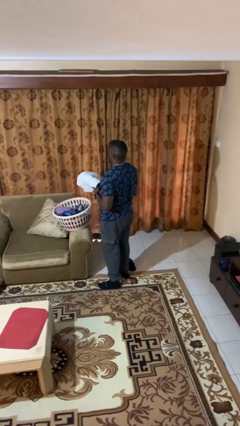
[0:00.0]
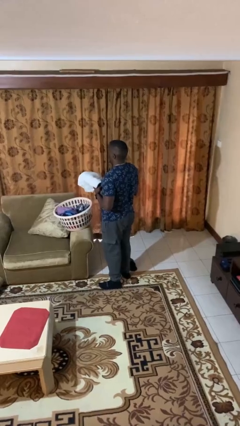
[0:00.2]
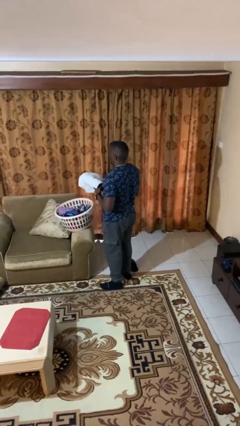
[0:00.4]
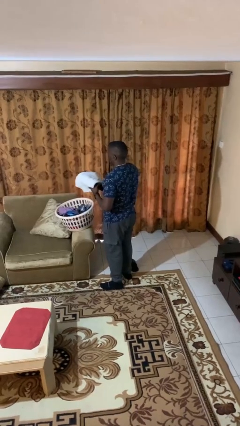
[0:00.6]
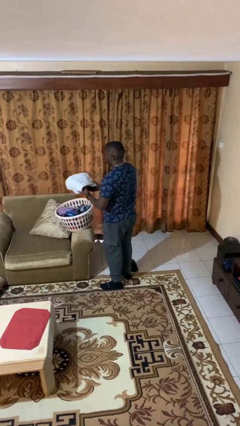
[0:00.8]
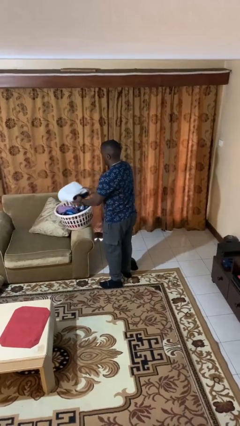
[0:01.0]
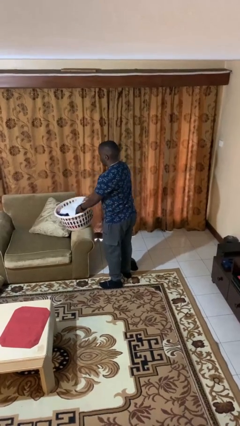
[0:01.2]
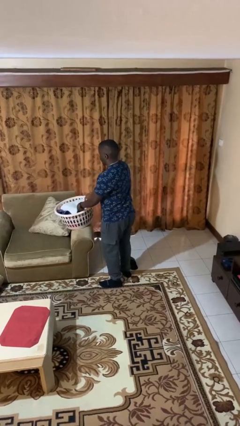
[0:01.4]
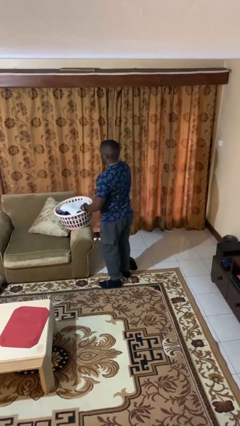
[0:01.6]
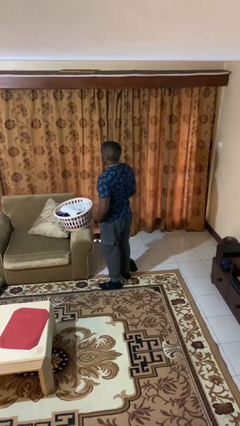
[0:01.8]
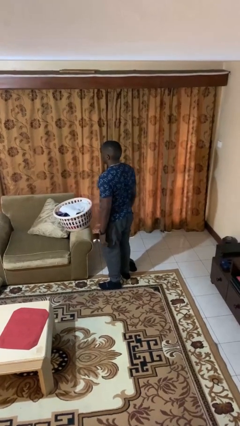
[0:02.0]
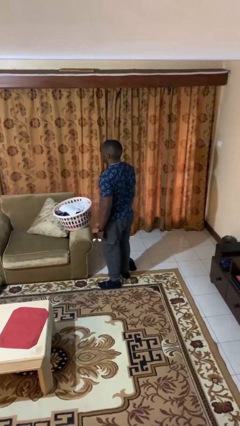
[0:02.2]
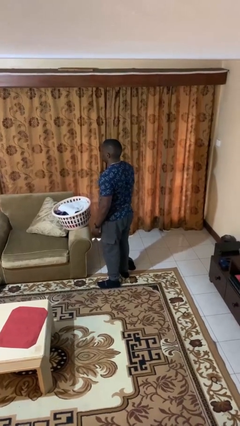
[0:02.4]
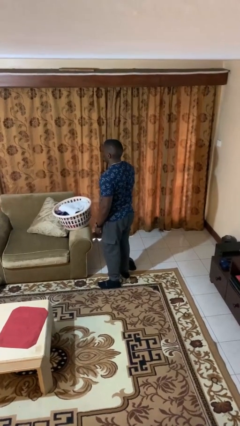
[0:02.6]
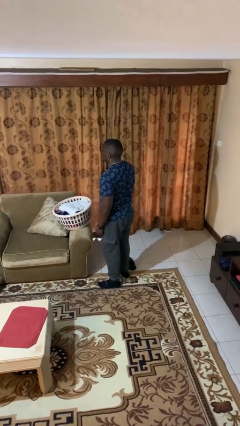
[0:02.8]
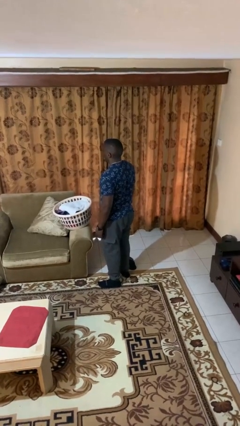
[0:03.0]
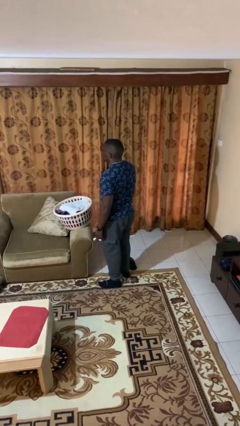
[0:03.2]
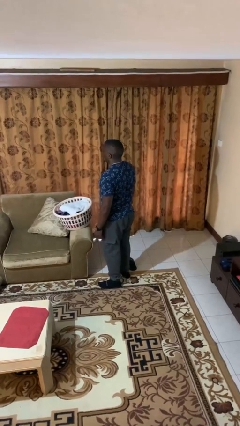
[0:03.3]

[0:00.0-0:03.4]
person puts object into basket

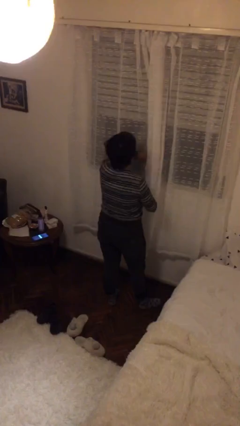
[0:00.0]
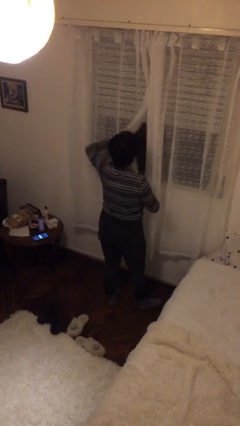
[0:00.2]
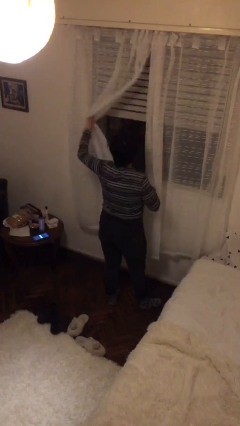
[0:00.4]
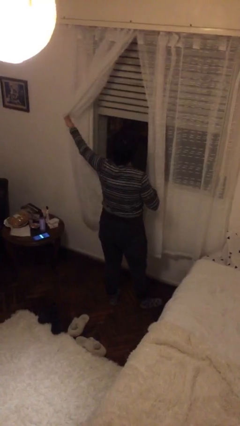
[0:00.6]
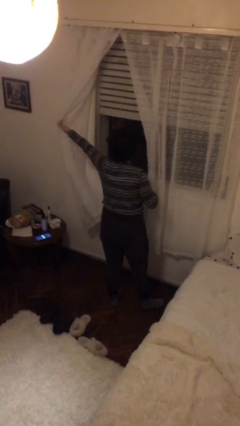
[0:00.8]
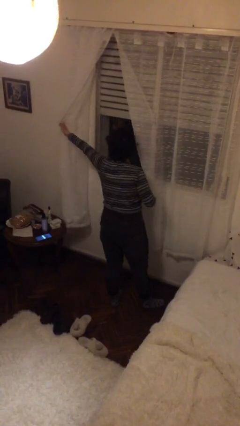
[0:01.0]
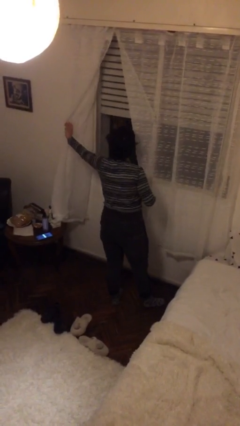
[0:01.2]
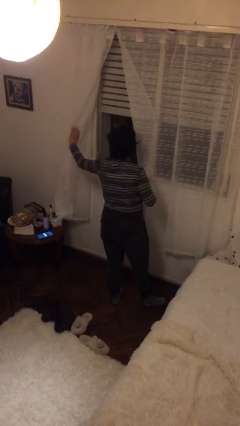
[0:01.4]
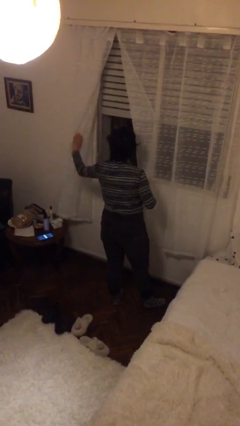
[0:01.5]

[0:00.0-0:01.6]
person opens curtains

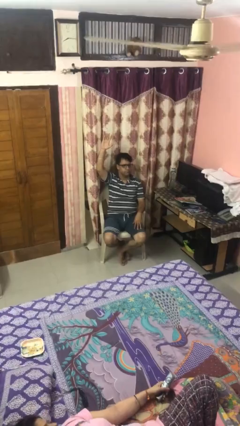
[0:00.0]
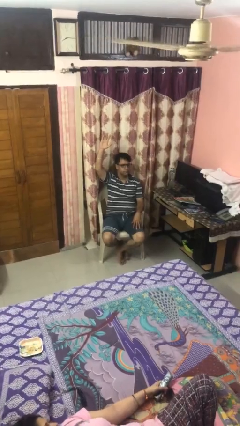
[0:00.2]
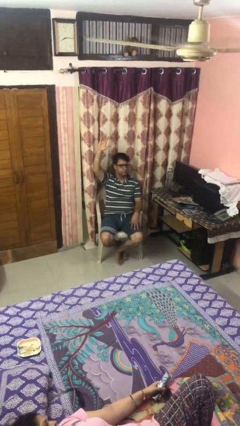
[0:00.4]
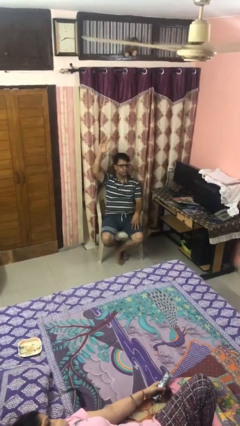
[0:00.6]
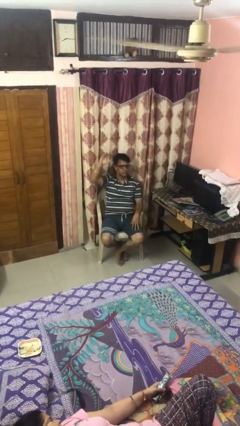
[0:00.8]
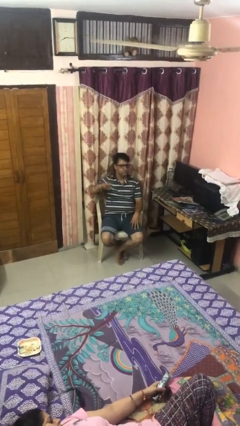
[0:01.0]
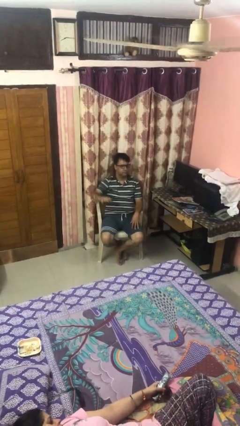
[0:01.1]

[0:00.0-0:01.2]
person gestures lower hand

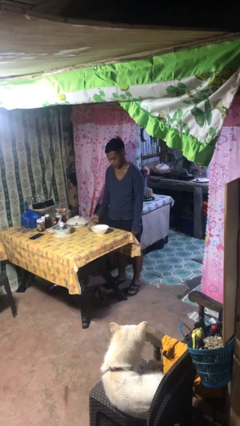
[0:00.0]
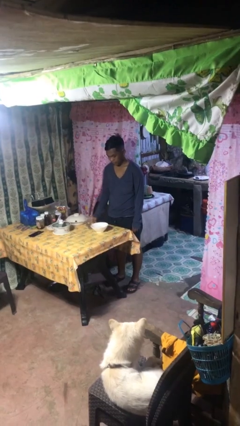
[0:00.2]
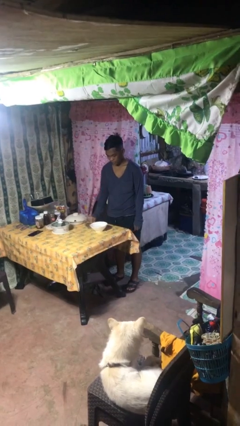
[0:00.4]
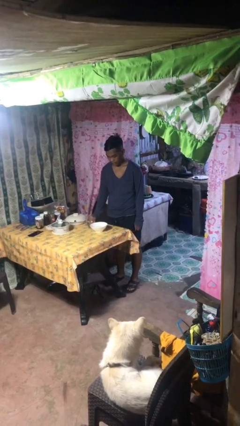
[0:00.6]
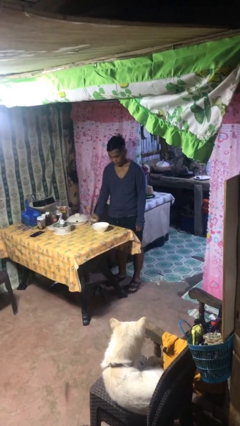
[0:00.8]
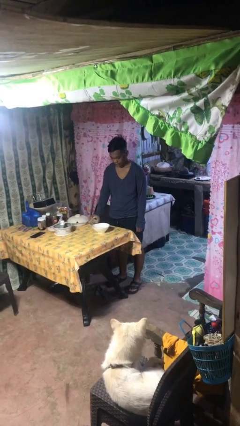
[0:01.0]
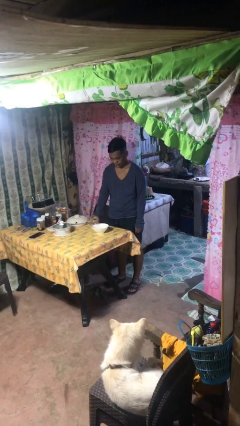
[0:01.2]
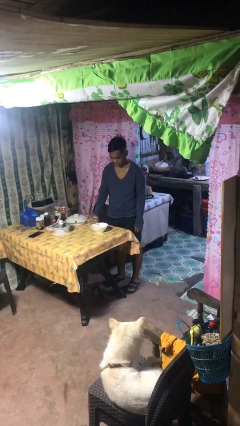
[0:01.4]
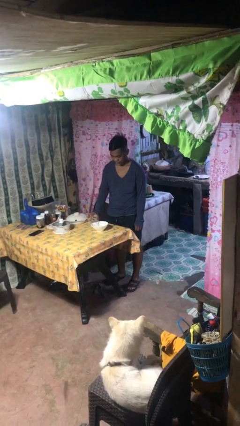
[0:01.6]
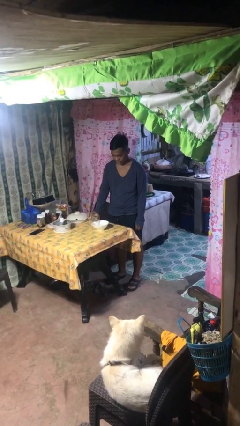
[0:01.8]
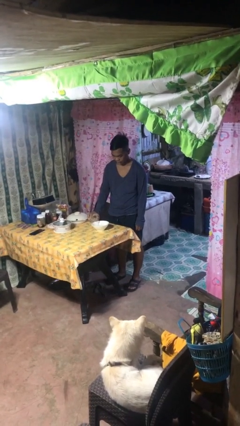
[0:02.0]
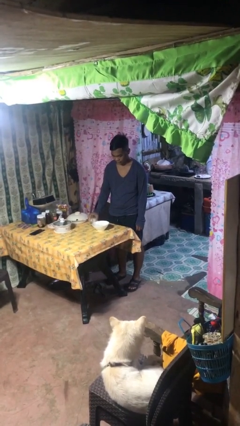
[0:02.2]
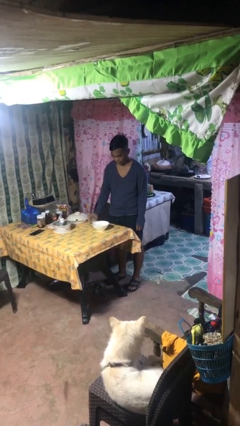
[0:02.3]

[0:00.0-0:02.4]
person pours into bowl

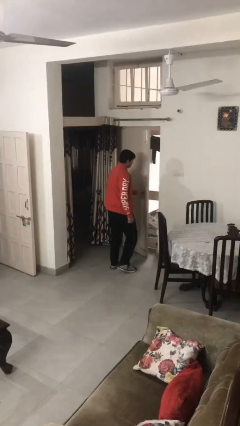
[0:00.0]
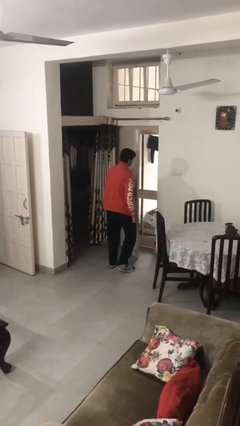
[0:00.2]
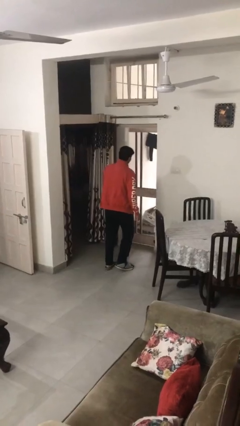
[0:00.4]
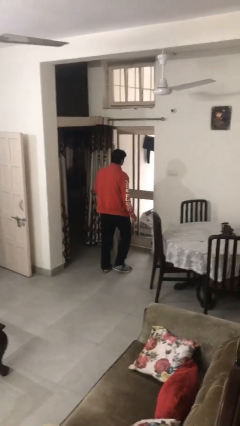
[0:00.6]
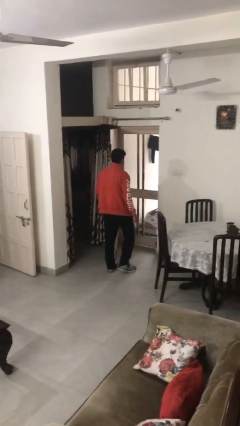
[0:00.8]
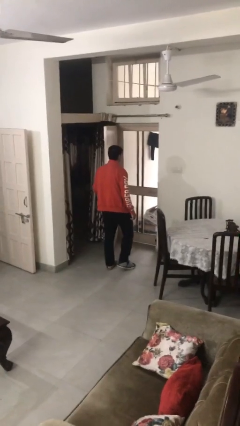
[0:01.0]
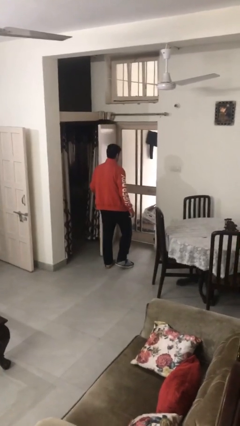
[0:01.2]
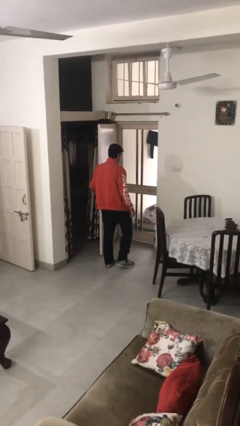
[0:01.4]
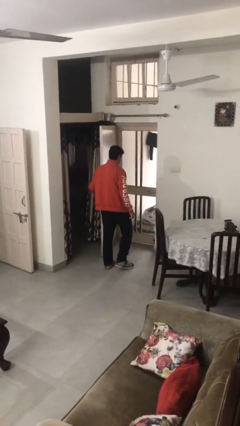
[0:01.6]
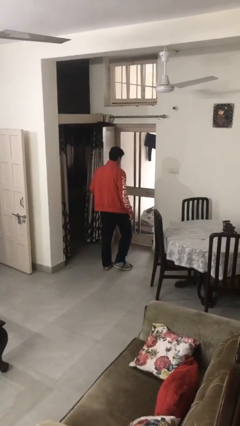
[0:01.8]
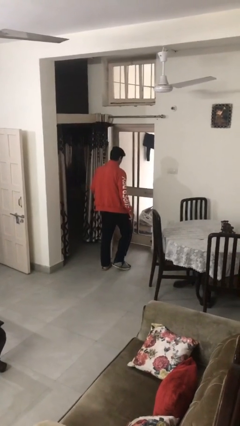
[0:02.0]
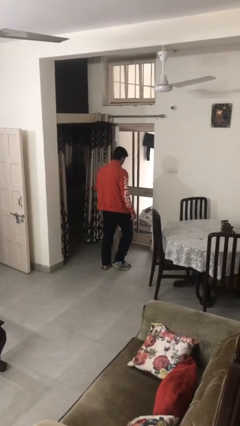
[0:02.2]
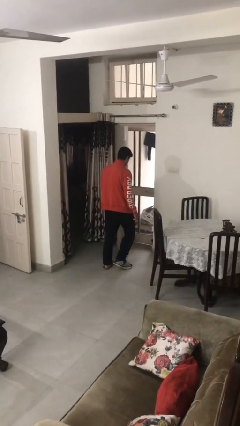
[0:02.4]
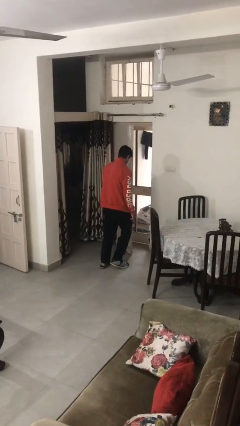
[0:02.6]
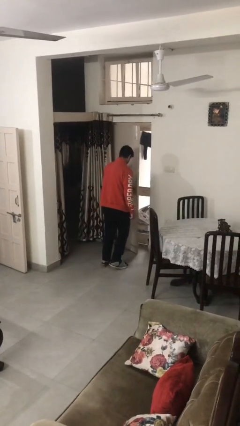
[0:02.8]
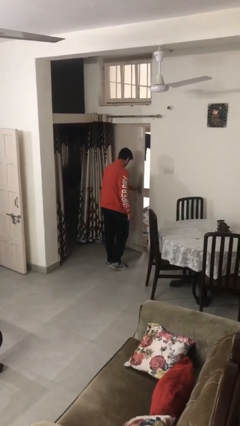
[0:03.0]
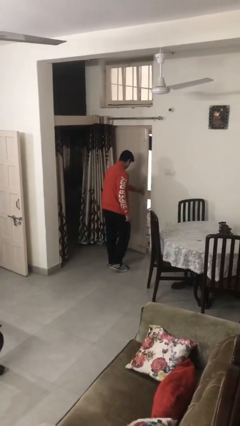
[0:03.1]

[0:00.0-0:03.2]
person closes facility door

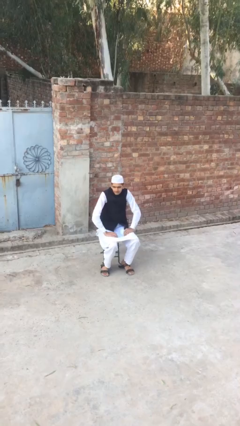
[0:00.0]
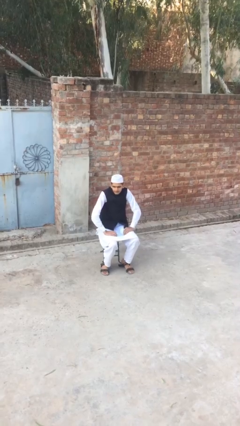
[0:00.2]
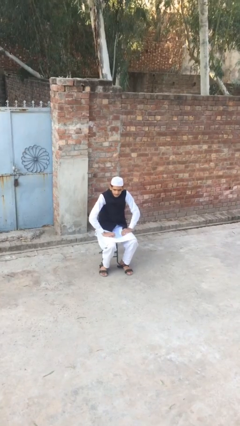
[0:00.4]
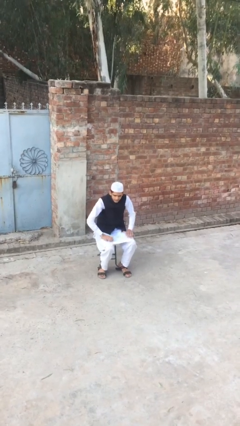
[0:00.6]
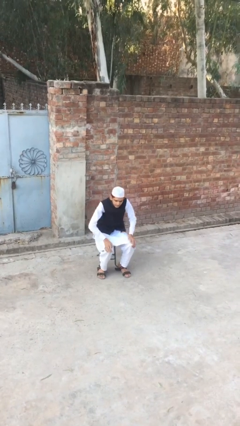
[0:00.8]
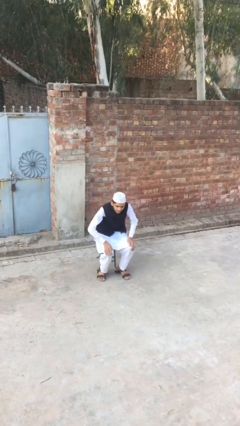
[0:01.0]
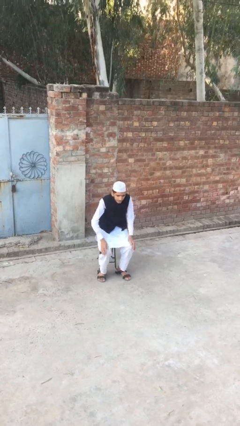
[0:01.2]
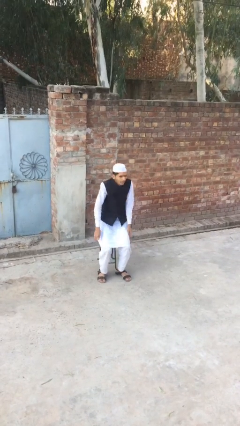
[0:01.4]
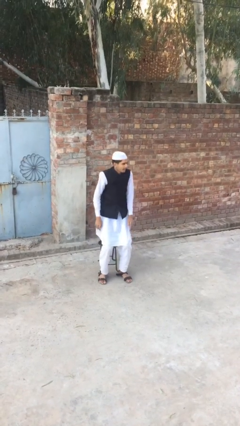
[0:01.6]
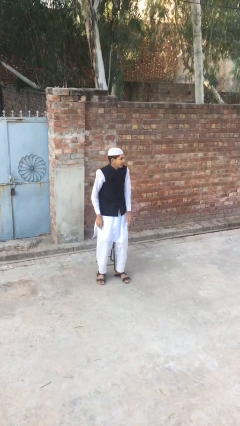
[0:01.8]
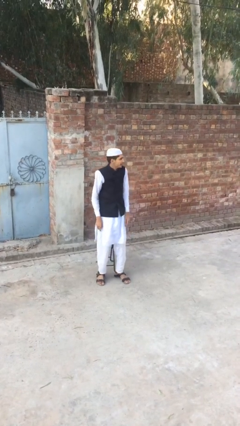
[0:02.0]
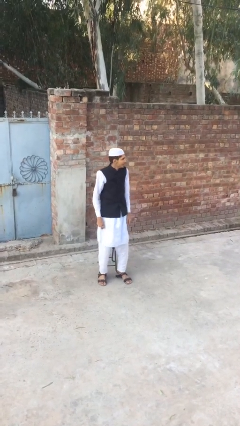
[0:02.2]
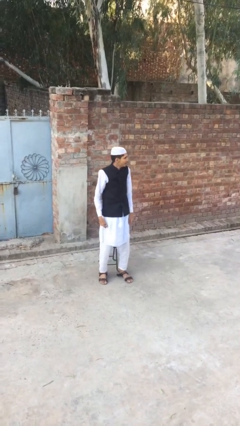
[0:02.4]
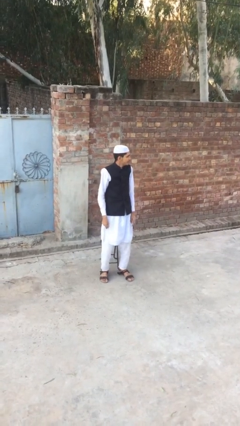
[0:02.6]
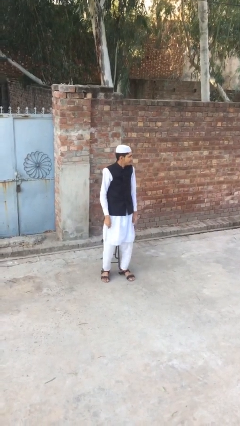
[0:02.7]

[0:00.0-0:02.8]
person stands up

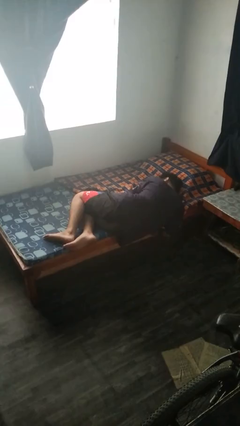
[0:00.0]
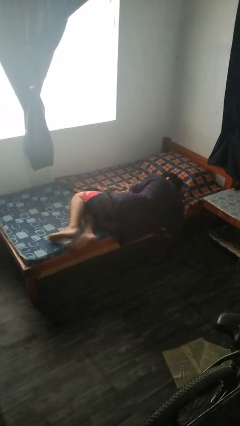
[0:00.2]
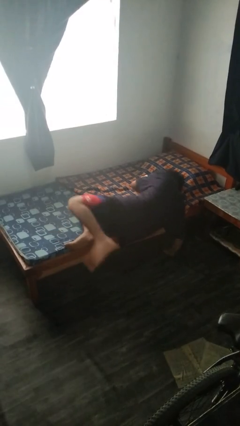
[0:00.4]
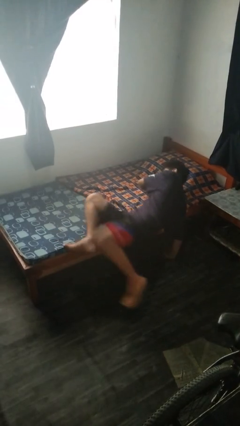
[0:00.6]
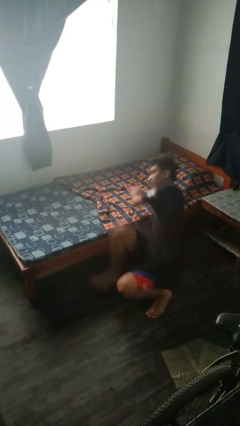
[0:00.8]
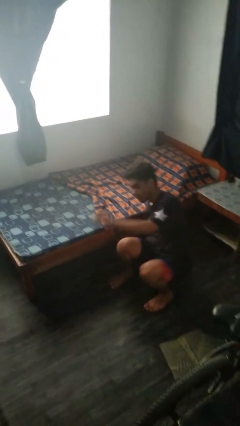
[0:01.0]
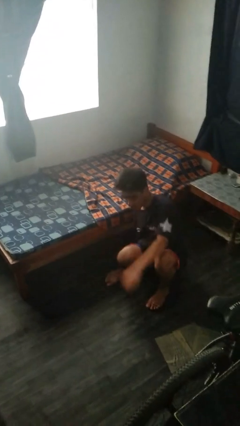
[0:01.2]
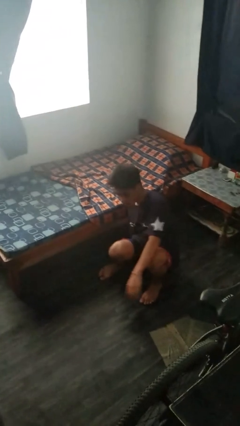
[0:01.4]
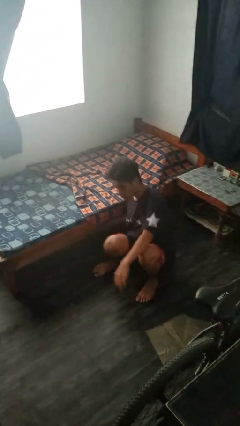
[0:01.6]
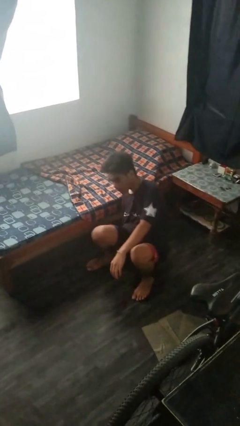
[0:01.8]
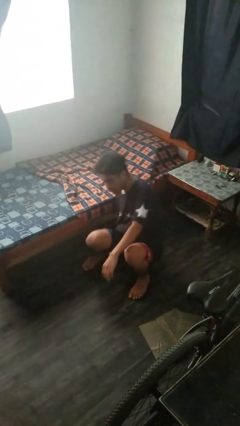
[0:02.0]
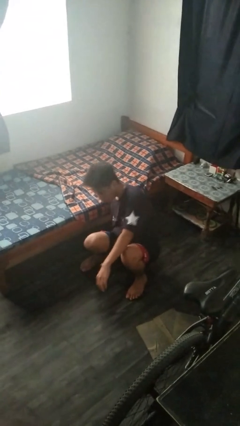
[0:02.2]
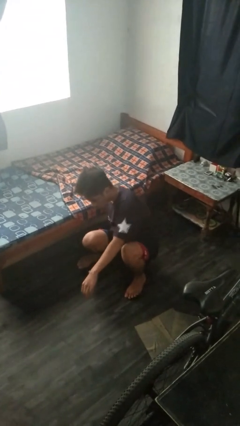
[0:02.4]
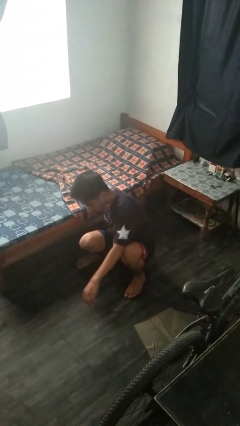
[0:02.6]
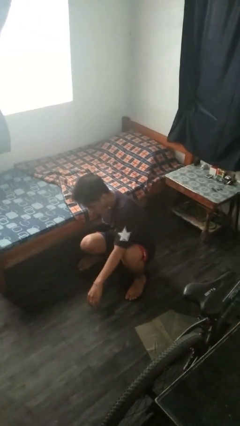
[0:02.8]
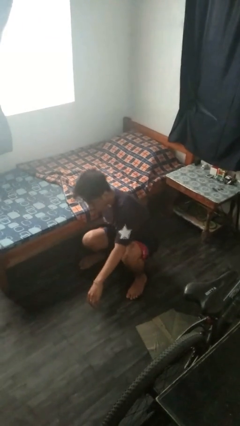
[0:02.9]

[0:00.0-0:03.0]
person falls from bed
